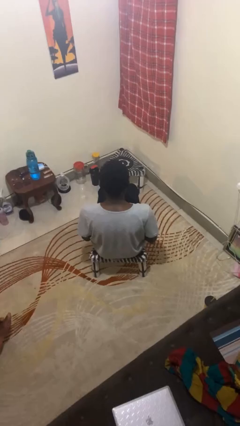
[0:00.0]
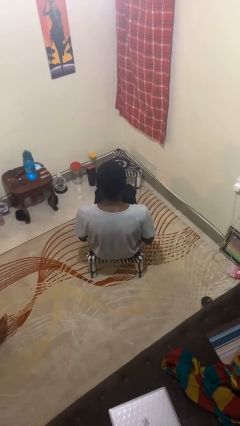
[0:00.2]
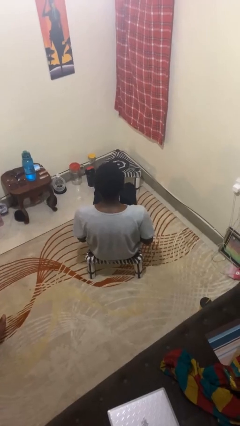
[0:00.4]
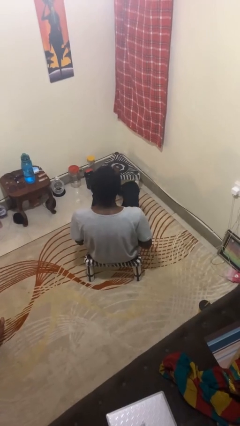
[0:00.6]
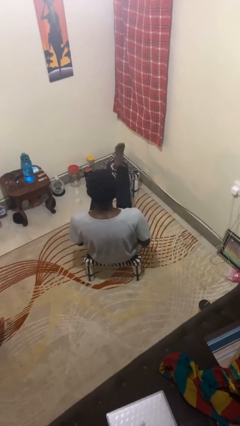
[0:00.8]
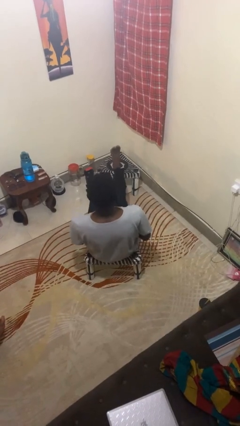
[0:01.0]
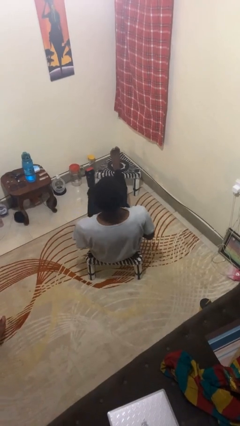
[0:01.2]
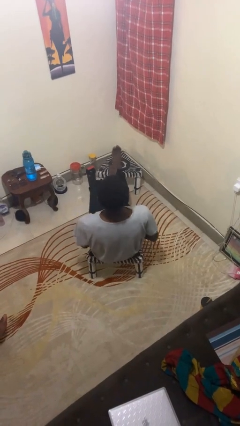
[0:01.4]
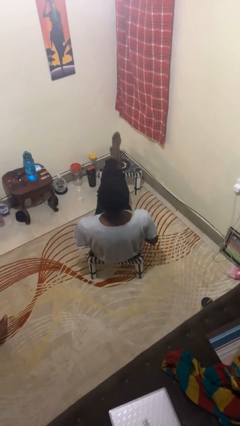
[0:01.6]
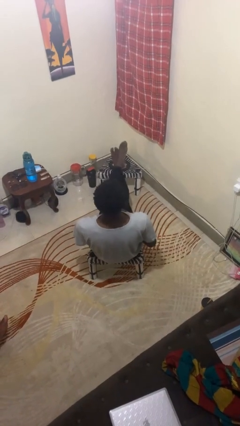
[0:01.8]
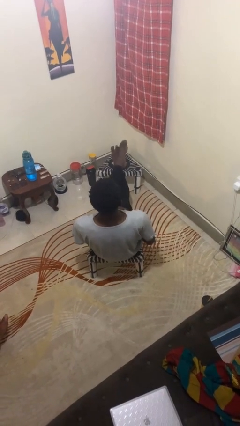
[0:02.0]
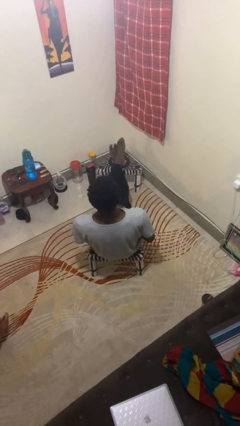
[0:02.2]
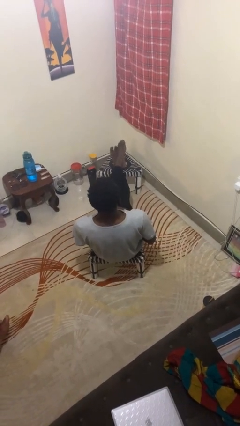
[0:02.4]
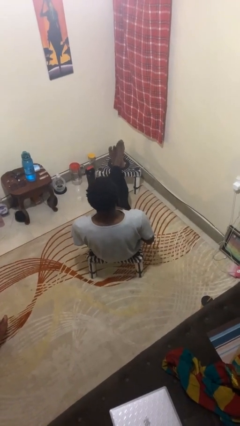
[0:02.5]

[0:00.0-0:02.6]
person puts feet up

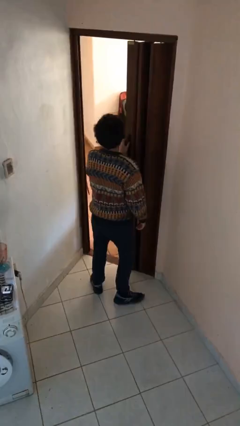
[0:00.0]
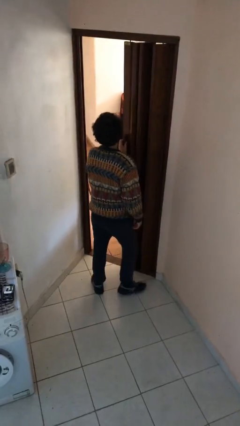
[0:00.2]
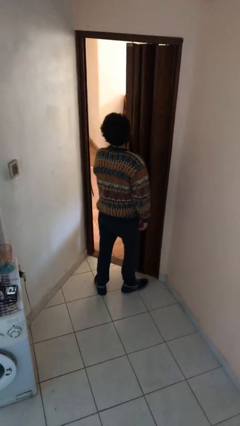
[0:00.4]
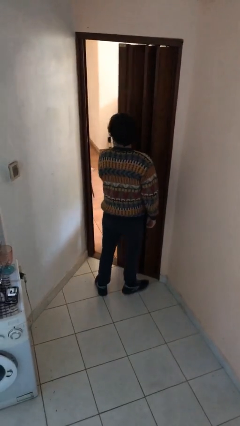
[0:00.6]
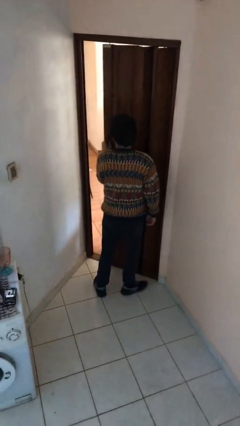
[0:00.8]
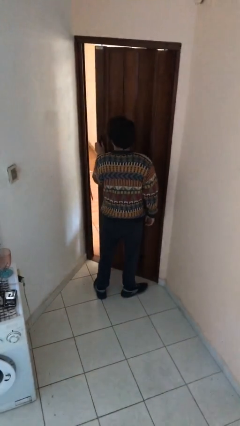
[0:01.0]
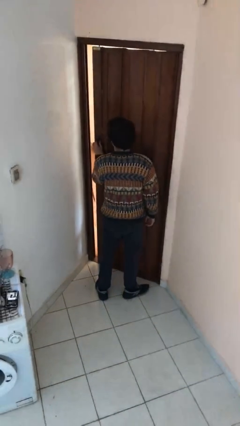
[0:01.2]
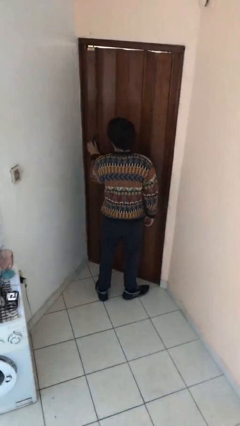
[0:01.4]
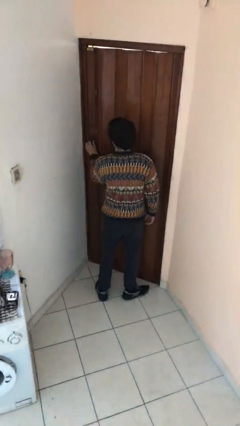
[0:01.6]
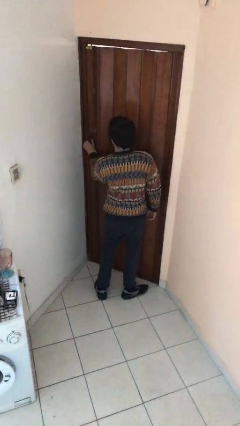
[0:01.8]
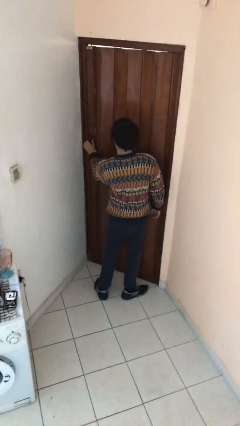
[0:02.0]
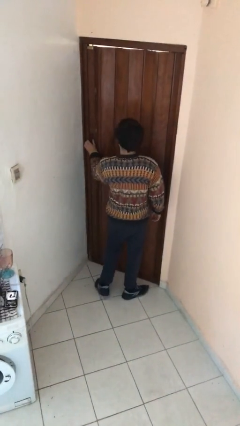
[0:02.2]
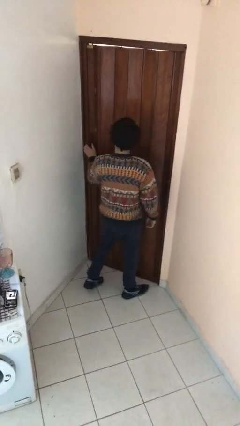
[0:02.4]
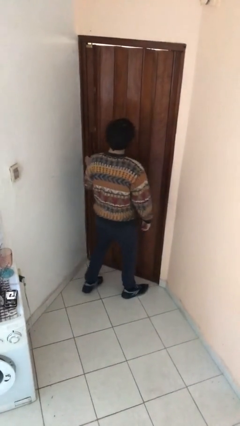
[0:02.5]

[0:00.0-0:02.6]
person closes sliding door

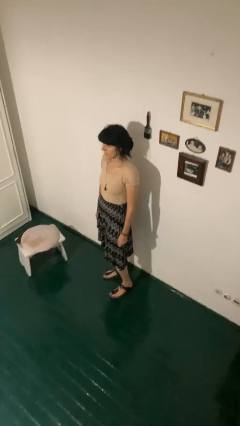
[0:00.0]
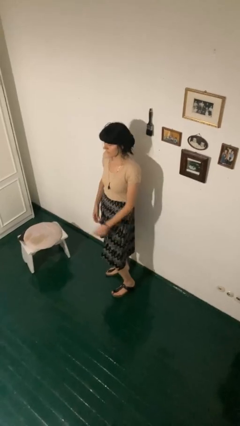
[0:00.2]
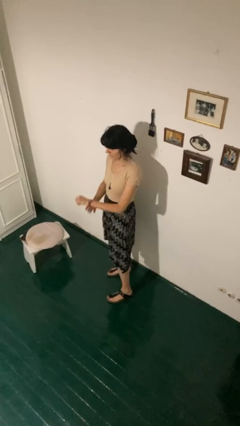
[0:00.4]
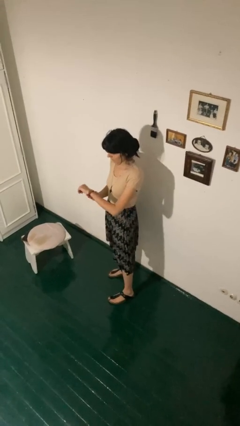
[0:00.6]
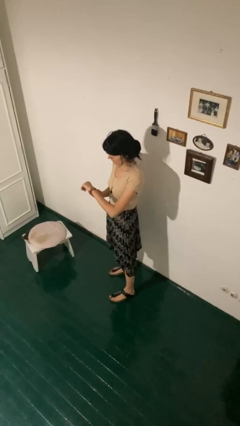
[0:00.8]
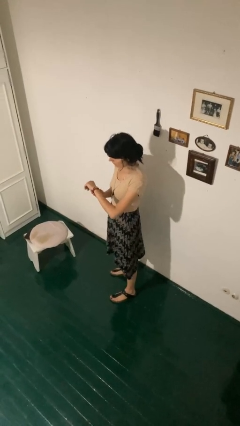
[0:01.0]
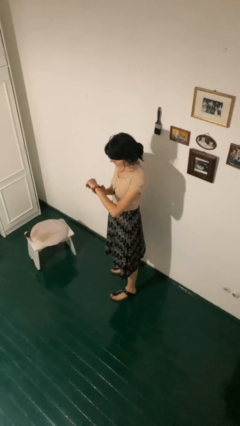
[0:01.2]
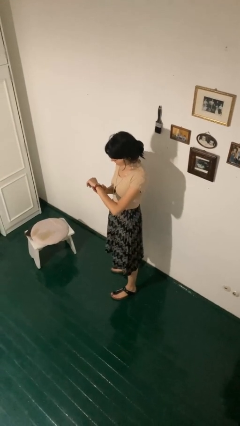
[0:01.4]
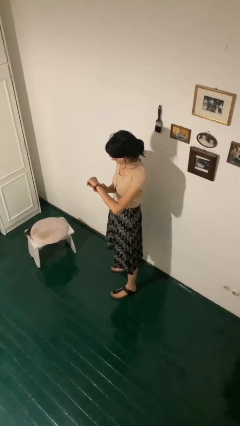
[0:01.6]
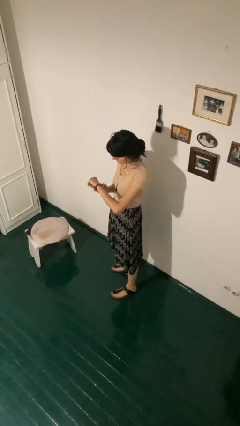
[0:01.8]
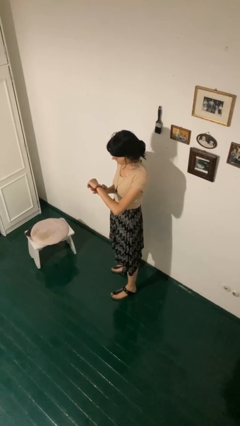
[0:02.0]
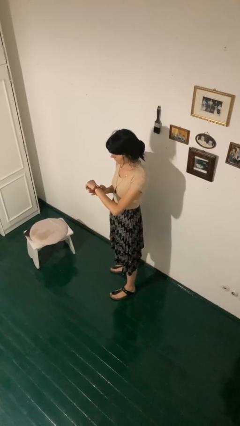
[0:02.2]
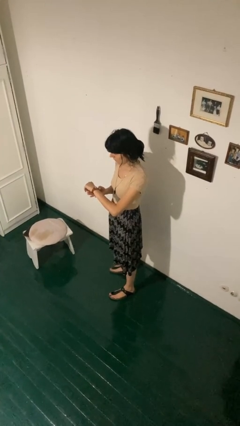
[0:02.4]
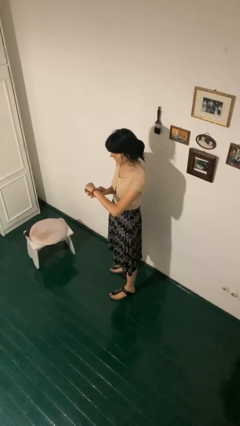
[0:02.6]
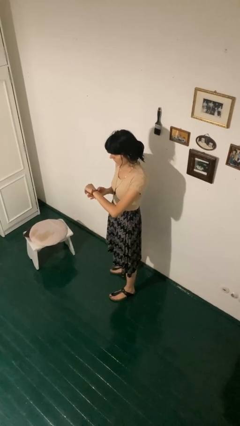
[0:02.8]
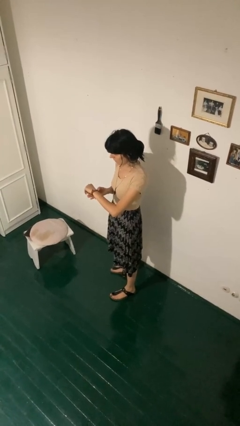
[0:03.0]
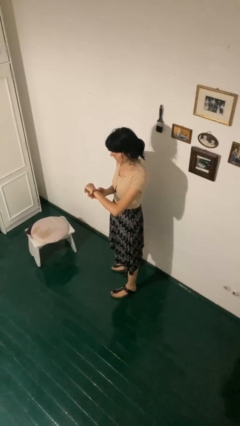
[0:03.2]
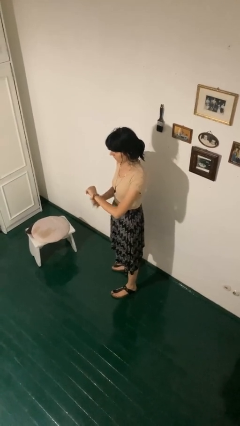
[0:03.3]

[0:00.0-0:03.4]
person looks at wristwatch

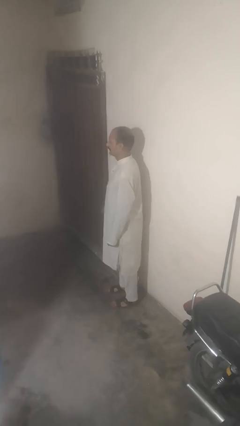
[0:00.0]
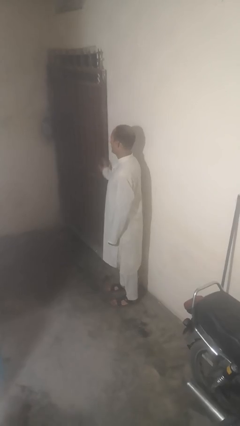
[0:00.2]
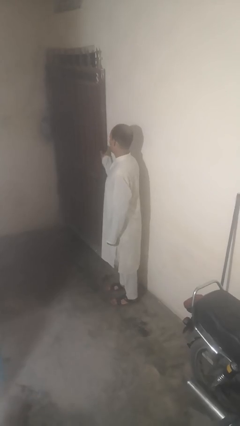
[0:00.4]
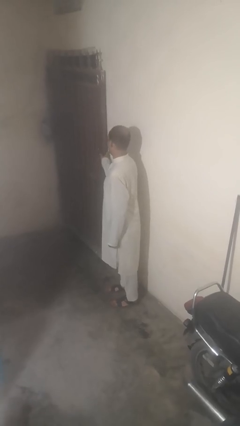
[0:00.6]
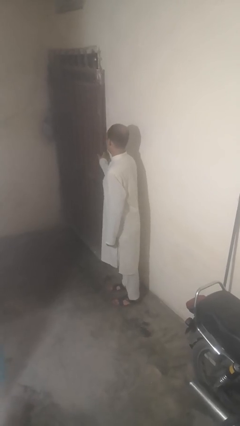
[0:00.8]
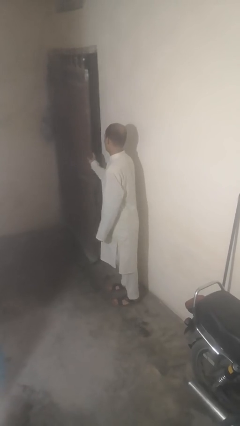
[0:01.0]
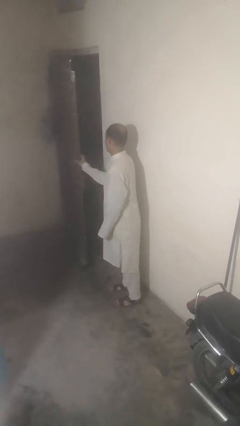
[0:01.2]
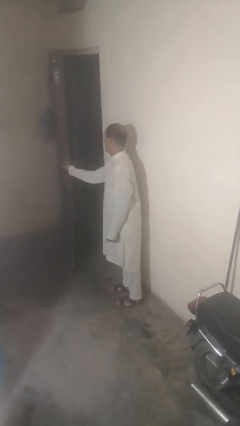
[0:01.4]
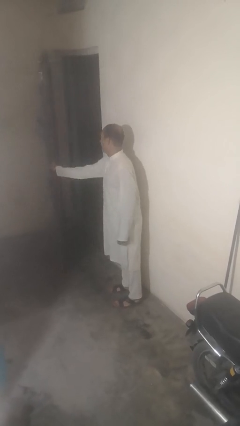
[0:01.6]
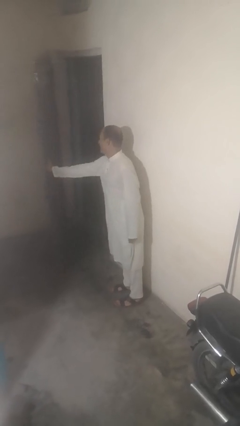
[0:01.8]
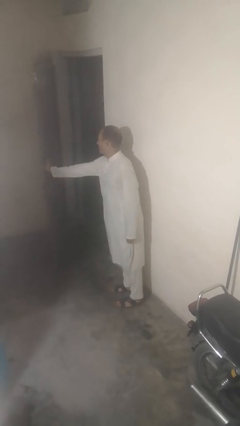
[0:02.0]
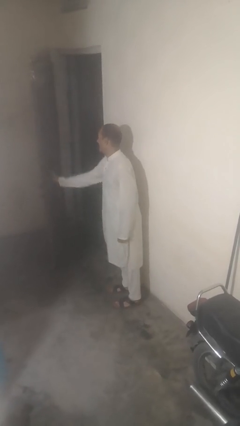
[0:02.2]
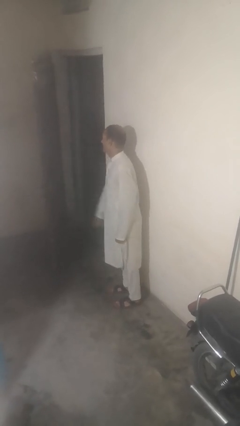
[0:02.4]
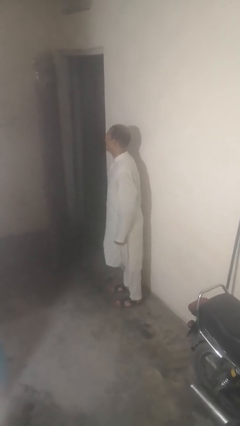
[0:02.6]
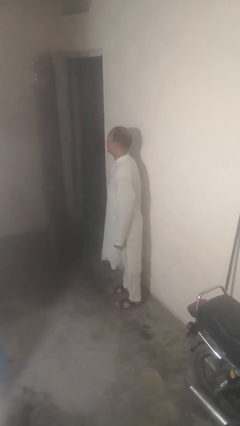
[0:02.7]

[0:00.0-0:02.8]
person opens gate

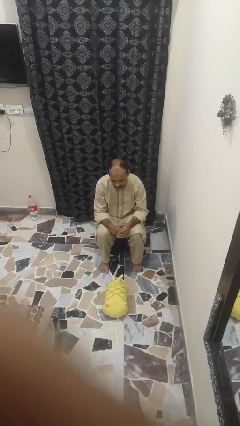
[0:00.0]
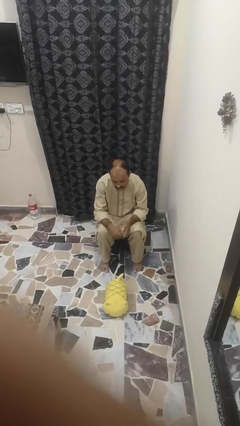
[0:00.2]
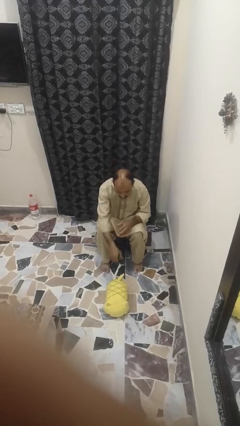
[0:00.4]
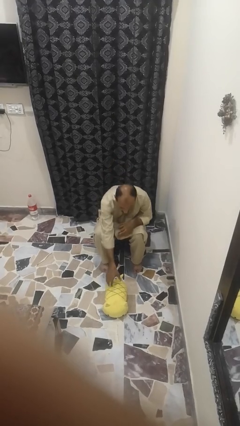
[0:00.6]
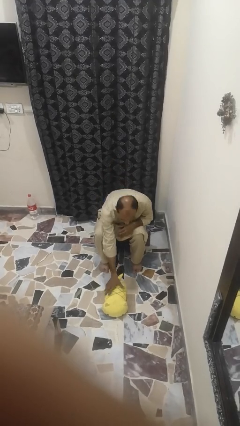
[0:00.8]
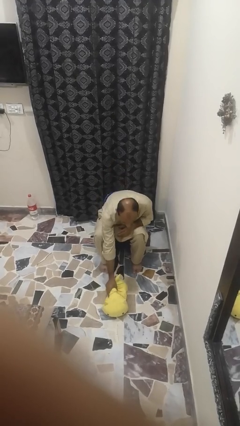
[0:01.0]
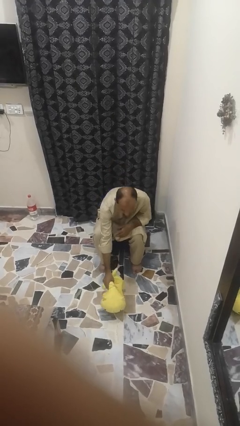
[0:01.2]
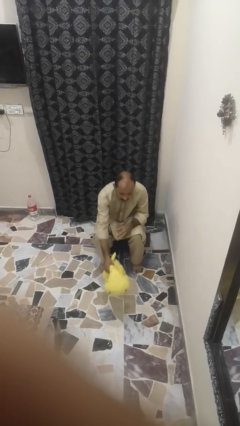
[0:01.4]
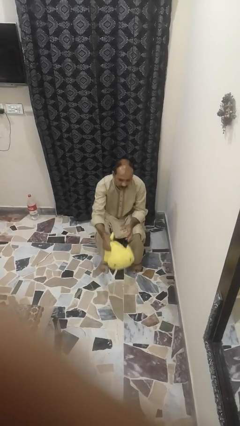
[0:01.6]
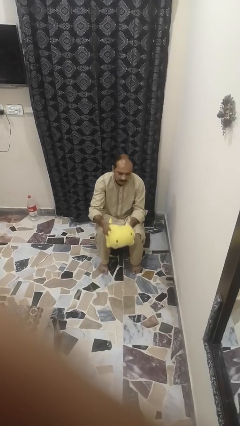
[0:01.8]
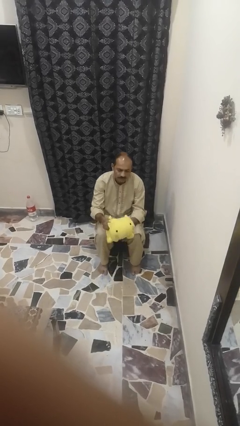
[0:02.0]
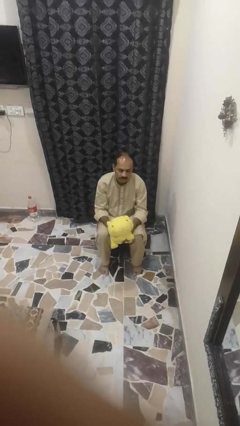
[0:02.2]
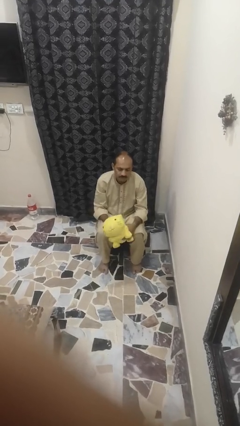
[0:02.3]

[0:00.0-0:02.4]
person picks up object from floor

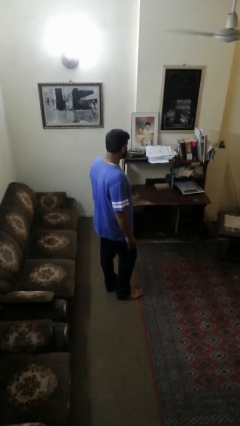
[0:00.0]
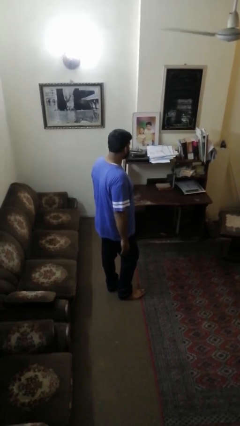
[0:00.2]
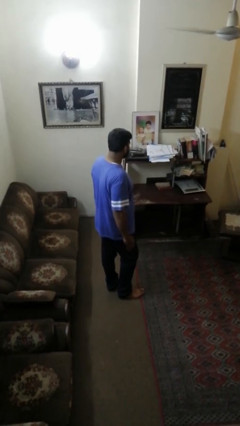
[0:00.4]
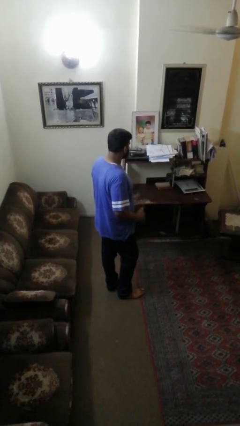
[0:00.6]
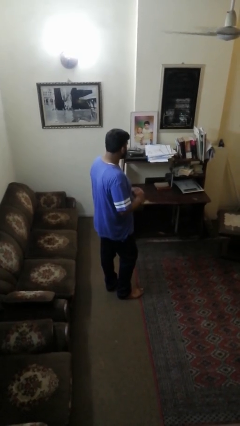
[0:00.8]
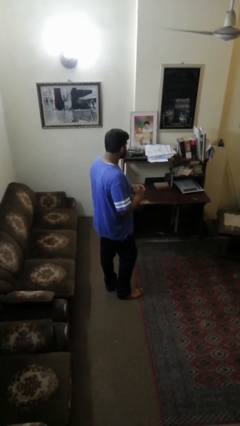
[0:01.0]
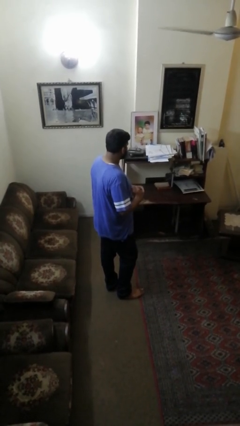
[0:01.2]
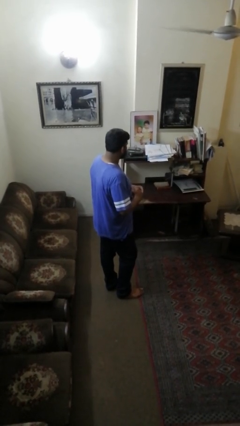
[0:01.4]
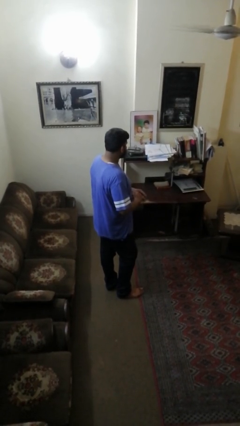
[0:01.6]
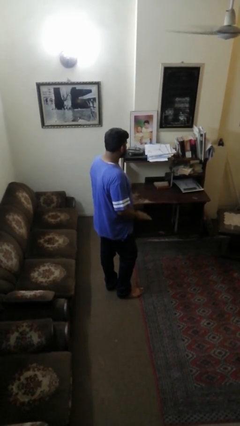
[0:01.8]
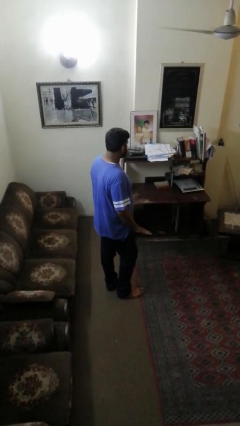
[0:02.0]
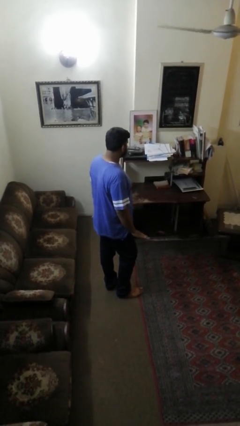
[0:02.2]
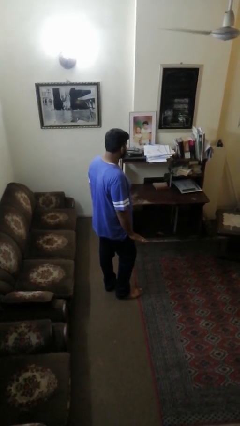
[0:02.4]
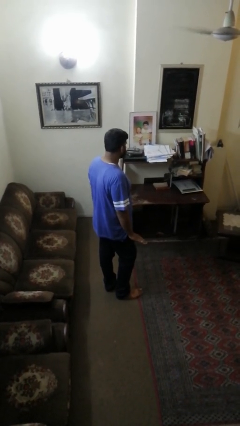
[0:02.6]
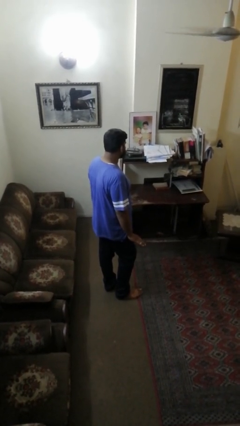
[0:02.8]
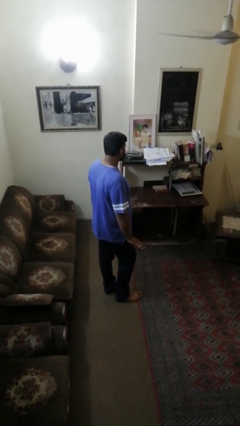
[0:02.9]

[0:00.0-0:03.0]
person puts on ring

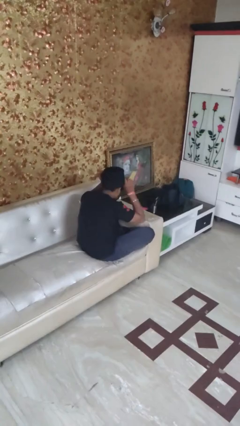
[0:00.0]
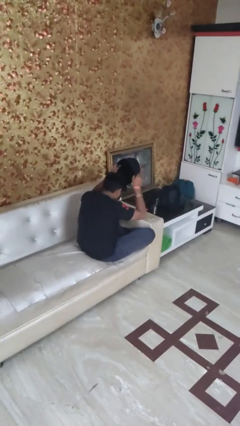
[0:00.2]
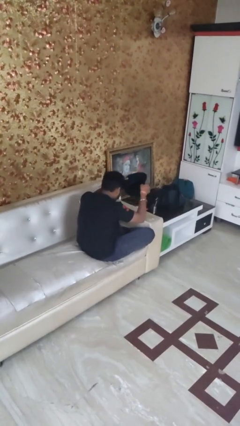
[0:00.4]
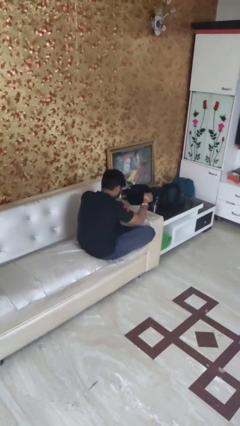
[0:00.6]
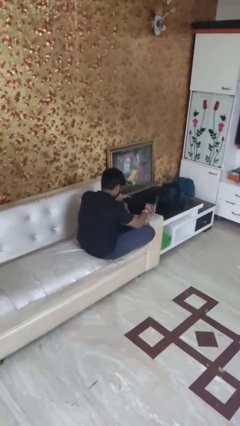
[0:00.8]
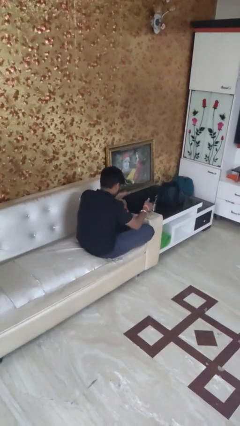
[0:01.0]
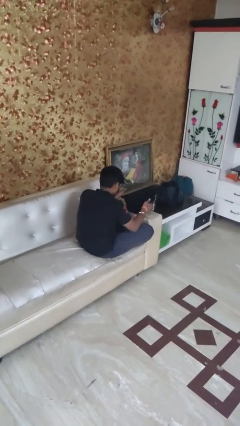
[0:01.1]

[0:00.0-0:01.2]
person takes off hat
